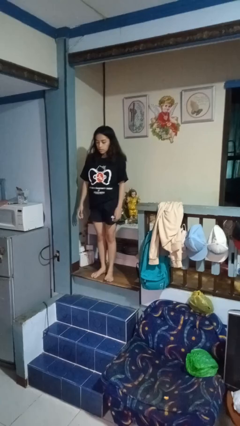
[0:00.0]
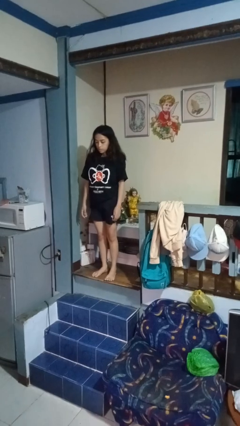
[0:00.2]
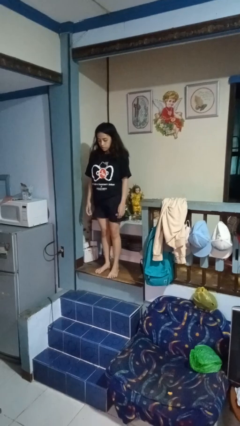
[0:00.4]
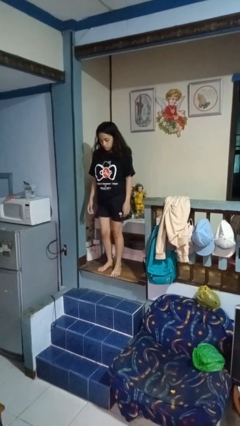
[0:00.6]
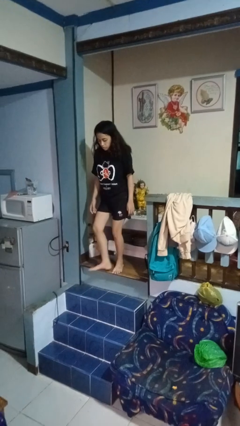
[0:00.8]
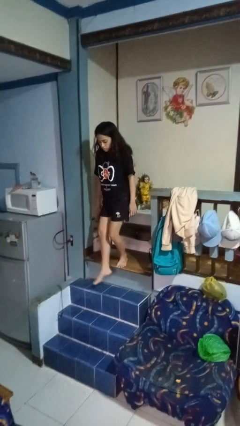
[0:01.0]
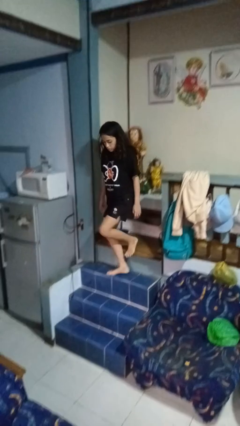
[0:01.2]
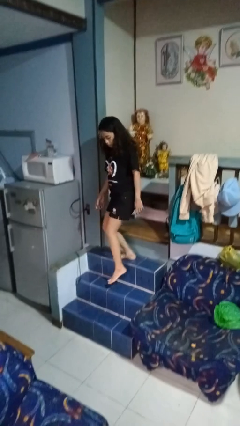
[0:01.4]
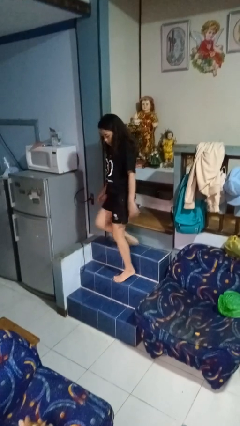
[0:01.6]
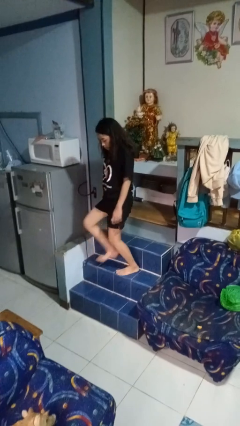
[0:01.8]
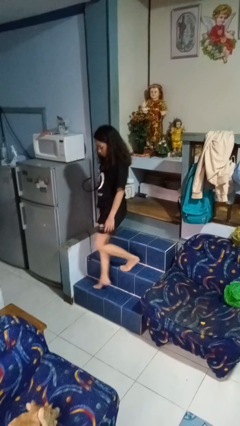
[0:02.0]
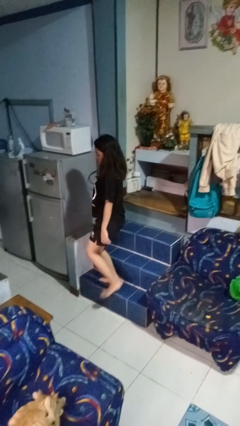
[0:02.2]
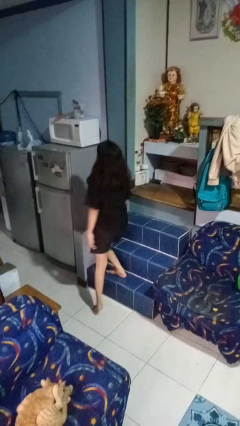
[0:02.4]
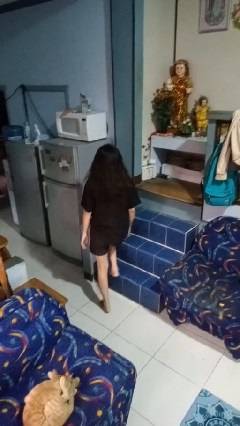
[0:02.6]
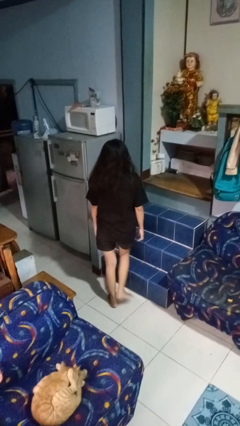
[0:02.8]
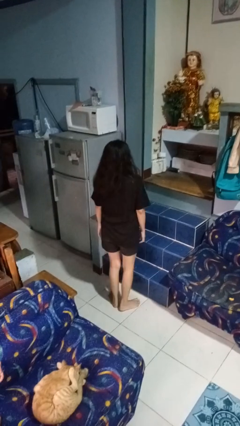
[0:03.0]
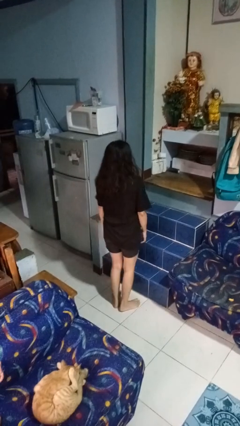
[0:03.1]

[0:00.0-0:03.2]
person climbs down stairs

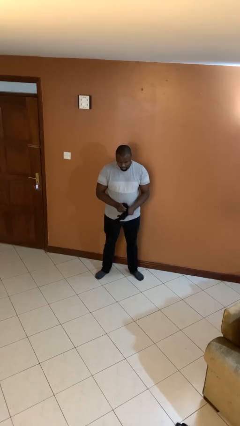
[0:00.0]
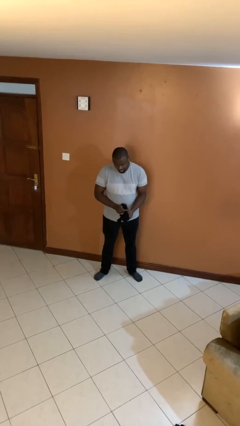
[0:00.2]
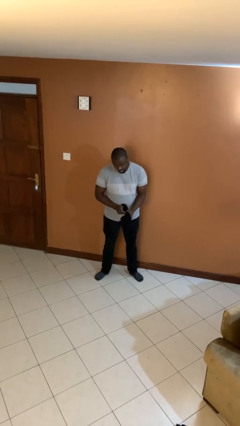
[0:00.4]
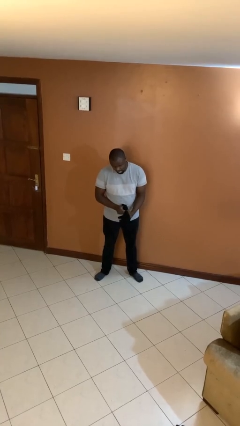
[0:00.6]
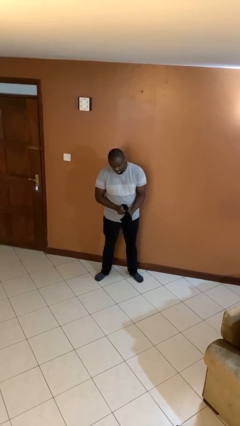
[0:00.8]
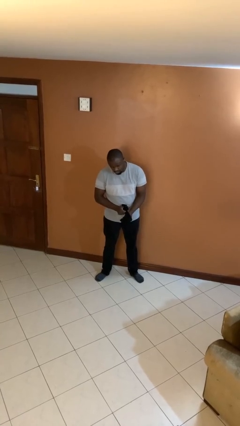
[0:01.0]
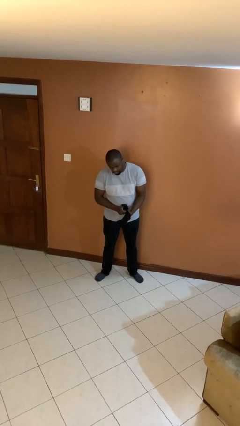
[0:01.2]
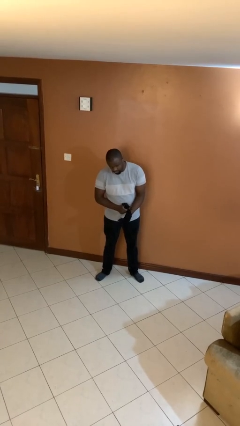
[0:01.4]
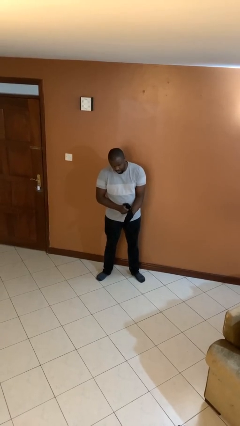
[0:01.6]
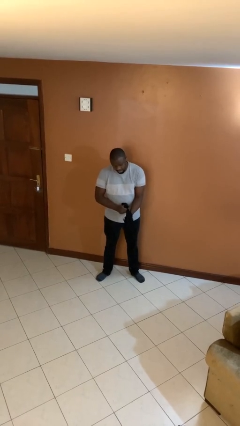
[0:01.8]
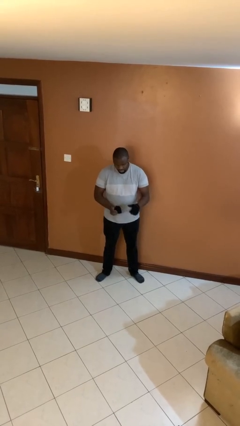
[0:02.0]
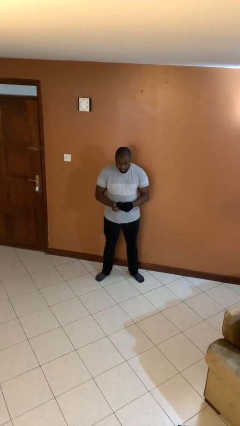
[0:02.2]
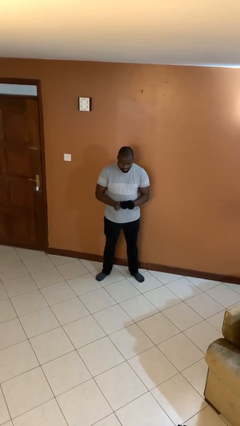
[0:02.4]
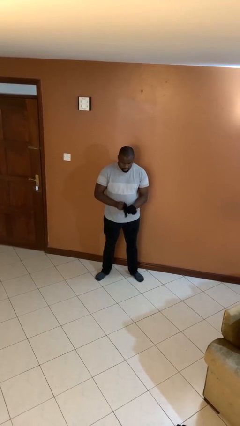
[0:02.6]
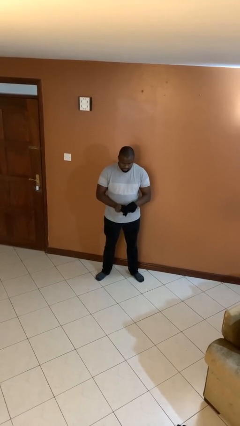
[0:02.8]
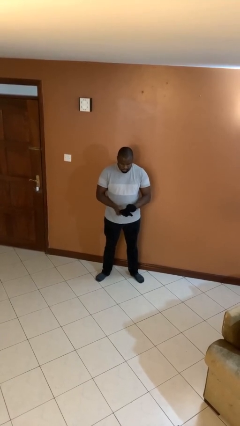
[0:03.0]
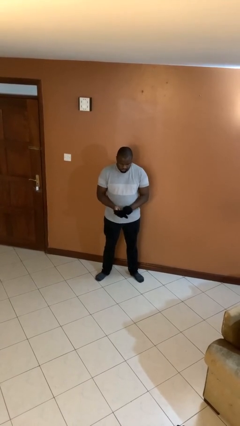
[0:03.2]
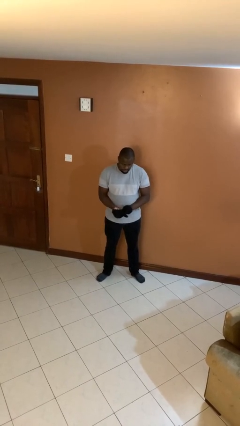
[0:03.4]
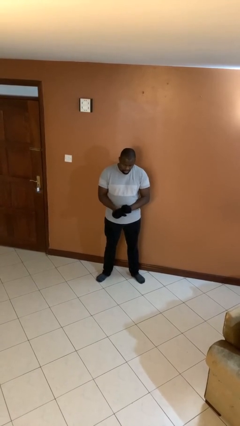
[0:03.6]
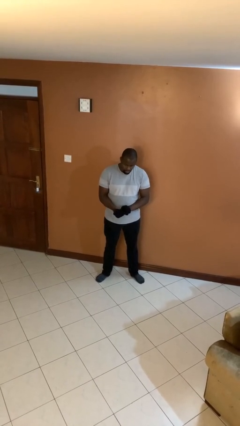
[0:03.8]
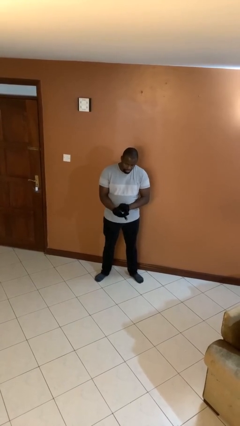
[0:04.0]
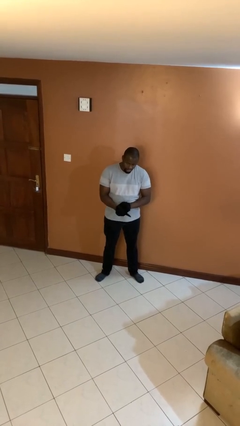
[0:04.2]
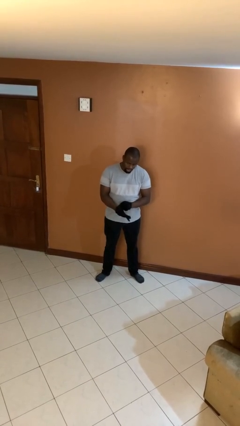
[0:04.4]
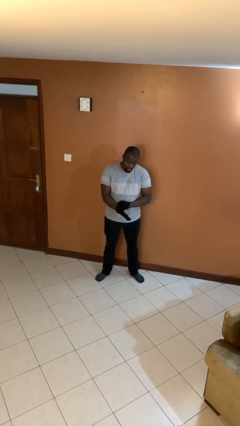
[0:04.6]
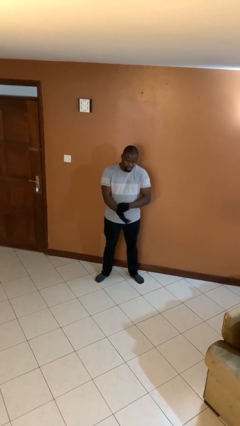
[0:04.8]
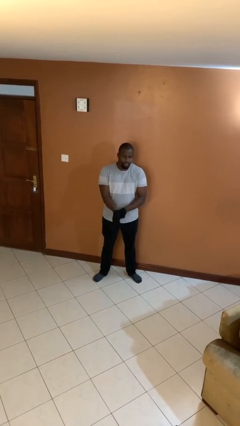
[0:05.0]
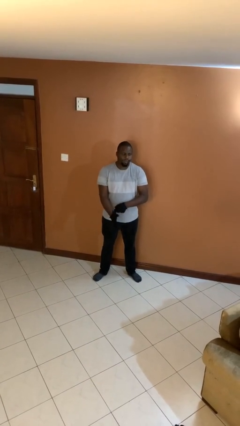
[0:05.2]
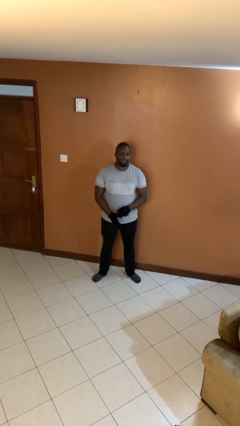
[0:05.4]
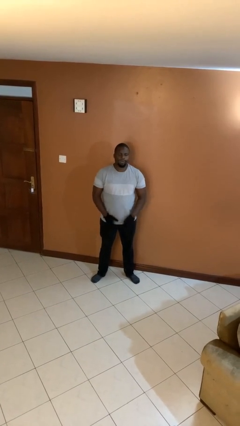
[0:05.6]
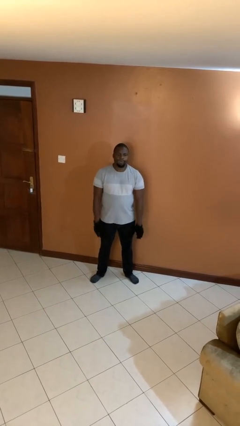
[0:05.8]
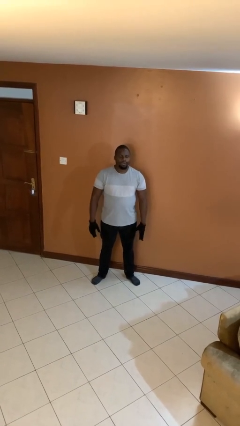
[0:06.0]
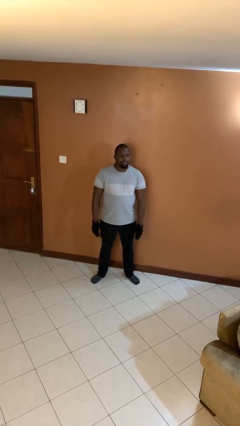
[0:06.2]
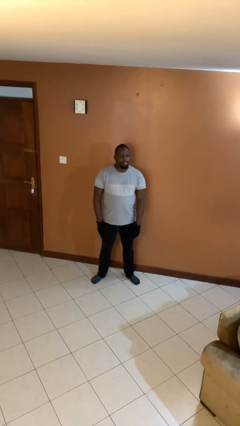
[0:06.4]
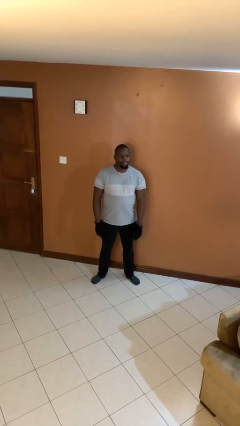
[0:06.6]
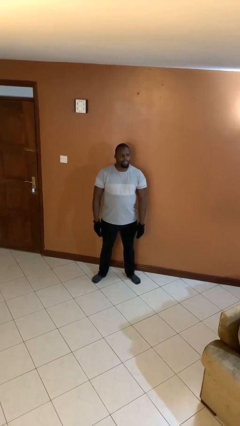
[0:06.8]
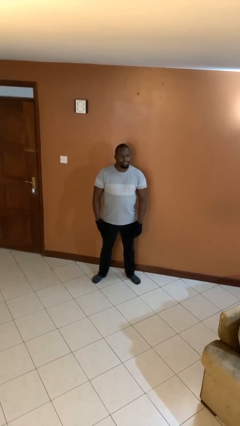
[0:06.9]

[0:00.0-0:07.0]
person puts on gloves

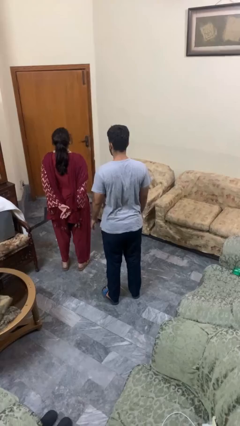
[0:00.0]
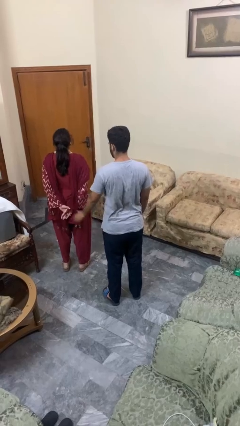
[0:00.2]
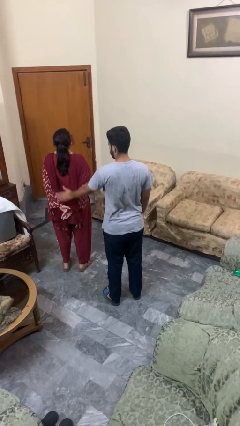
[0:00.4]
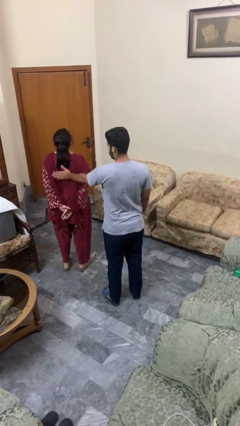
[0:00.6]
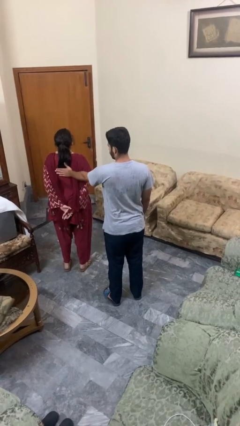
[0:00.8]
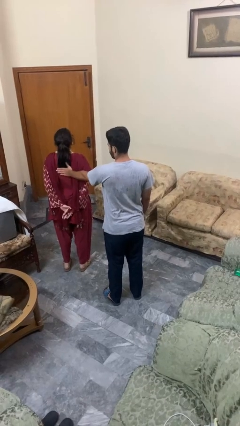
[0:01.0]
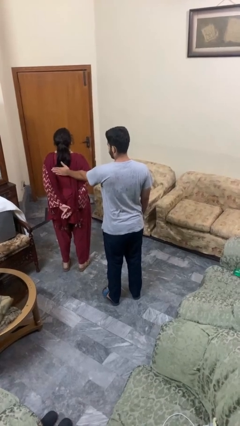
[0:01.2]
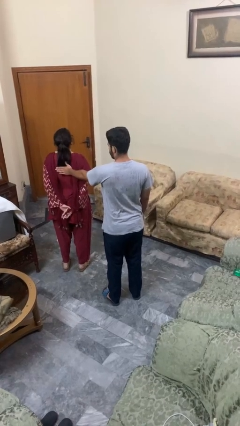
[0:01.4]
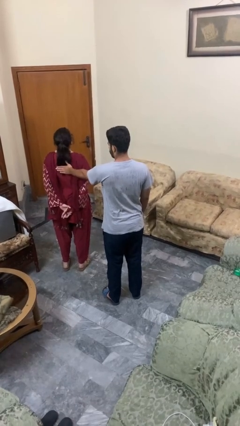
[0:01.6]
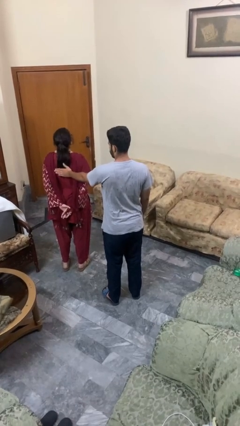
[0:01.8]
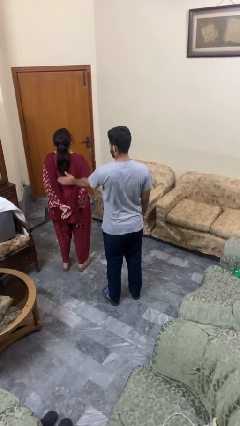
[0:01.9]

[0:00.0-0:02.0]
person touches back of person

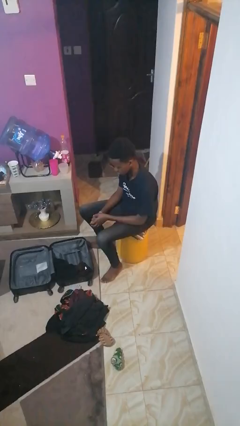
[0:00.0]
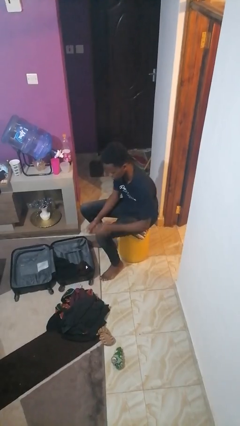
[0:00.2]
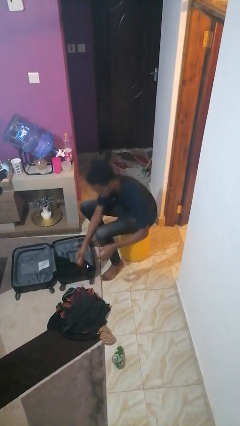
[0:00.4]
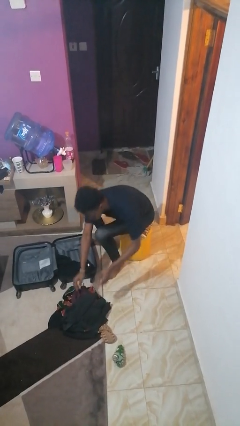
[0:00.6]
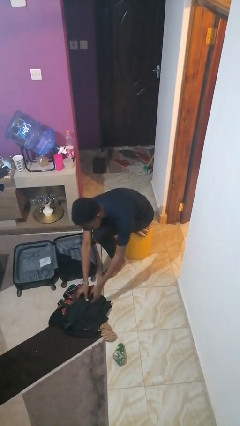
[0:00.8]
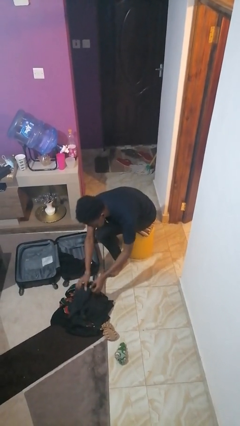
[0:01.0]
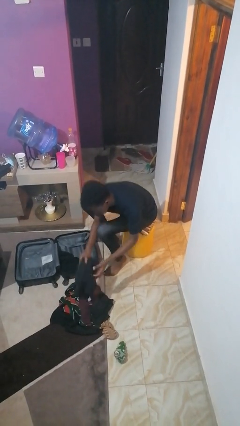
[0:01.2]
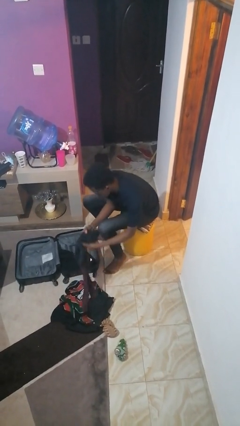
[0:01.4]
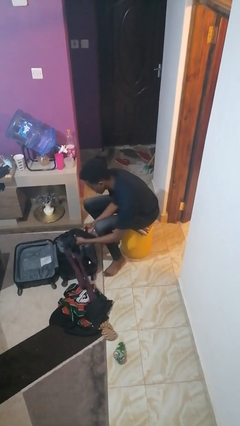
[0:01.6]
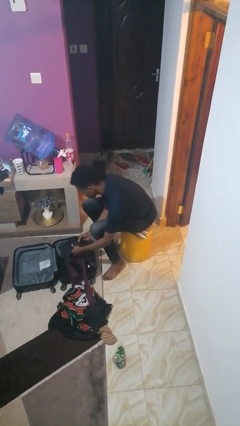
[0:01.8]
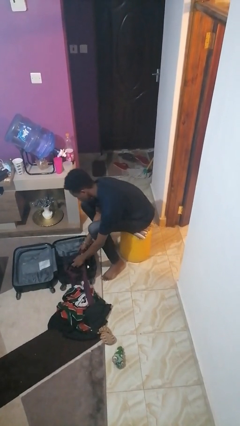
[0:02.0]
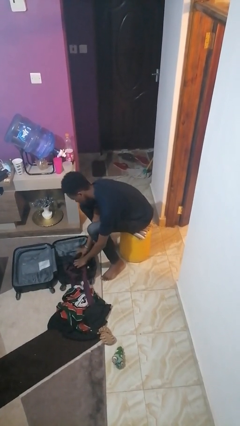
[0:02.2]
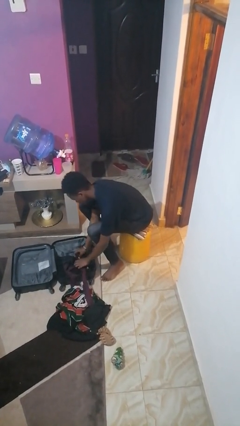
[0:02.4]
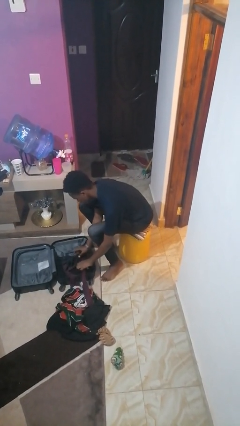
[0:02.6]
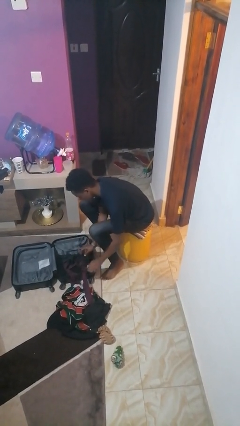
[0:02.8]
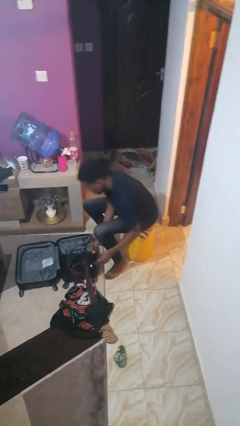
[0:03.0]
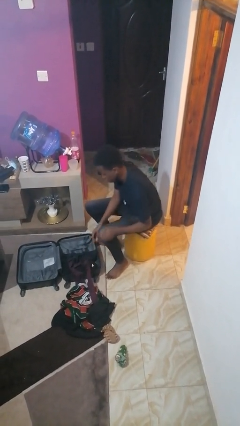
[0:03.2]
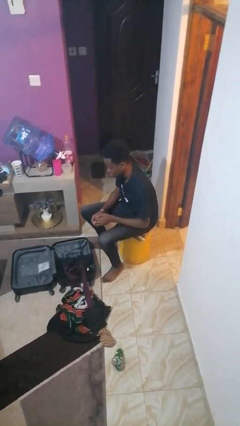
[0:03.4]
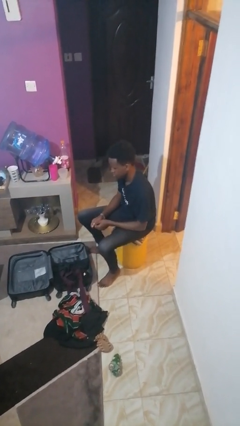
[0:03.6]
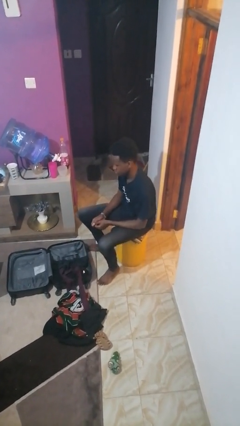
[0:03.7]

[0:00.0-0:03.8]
person loads clothes into suitcase

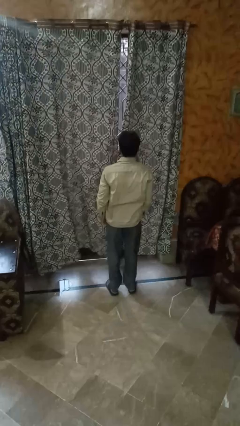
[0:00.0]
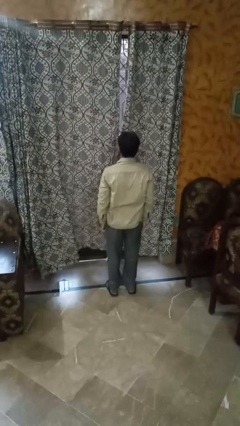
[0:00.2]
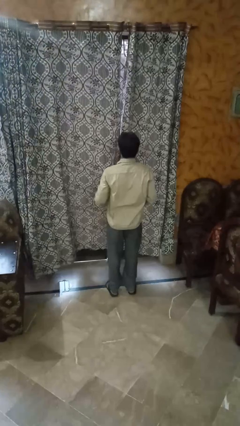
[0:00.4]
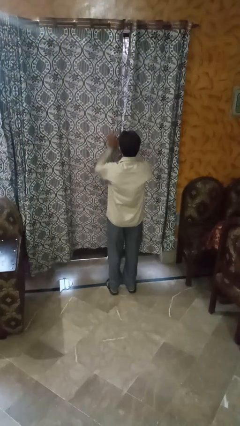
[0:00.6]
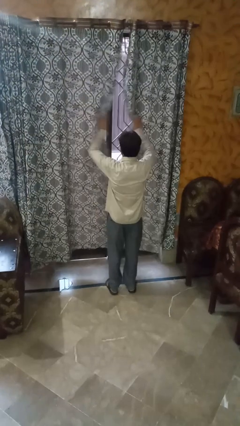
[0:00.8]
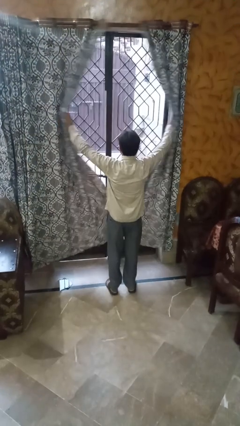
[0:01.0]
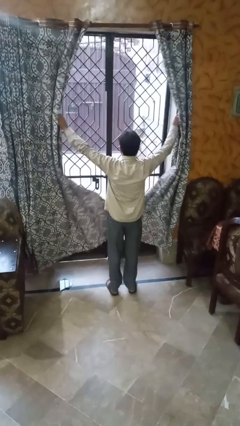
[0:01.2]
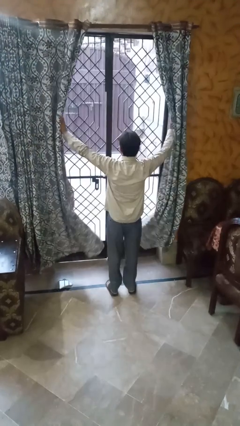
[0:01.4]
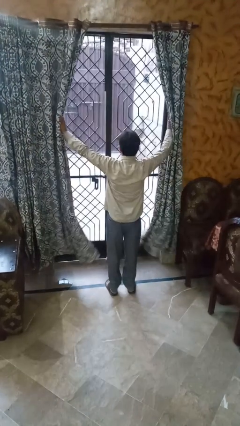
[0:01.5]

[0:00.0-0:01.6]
person opens curtains

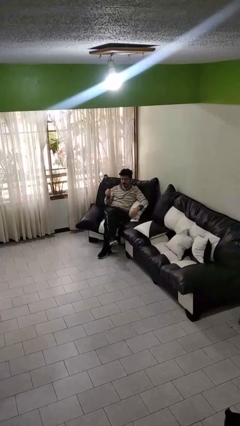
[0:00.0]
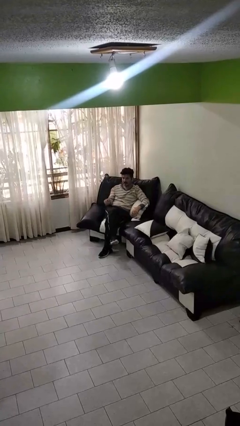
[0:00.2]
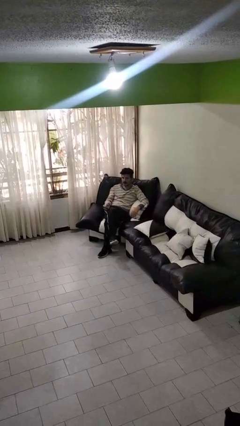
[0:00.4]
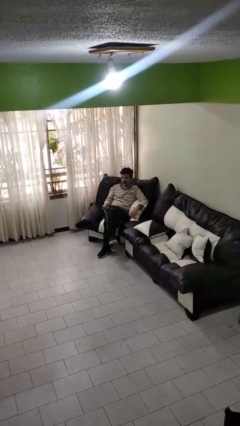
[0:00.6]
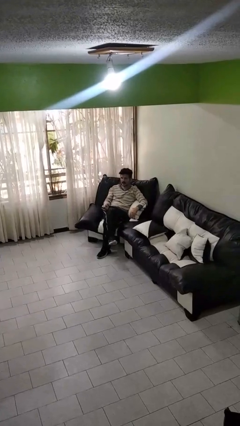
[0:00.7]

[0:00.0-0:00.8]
person takes off glasses
